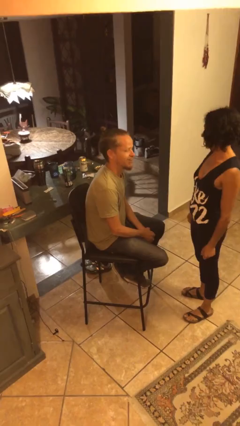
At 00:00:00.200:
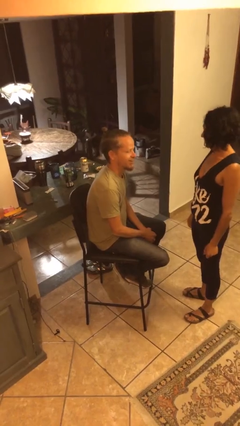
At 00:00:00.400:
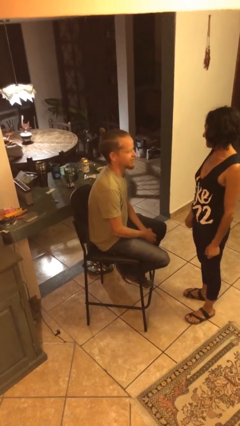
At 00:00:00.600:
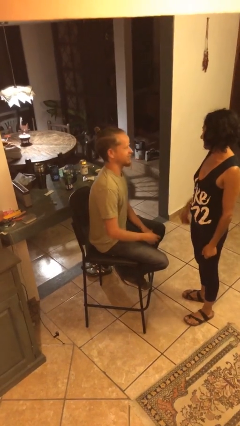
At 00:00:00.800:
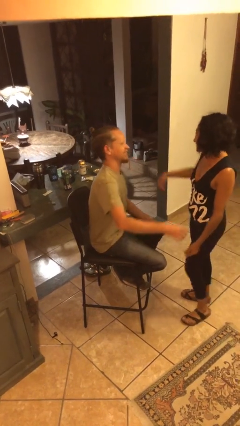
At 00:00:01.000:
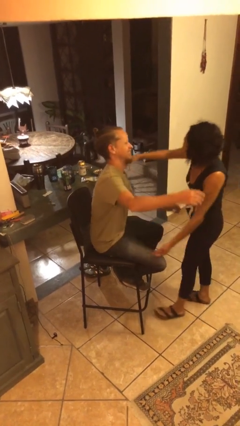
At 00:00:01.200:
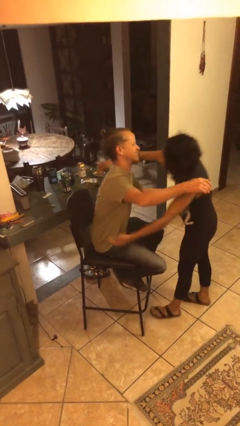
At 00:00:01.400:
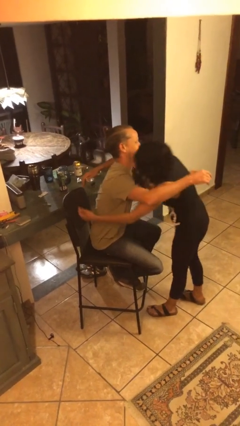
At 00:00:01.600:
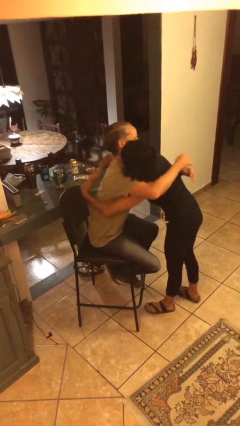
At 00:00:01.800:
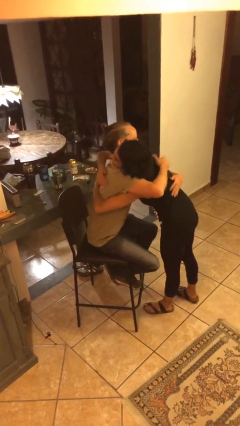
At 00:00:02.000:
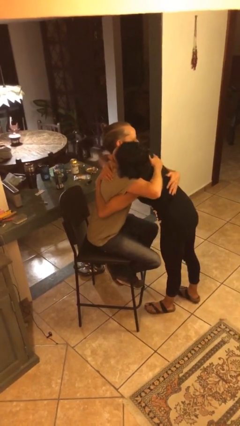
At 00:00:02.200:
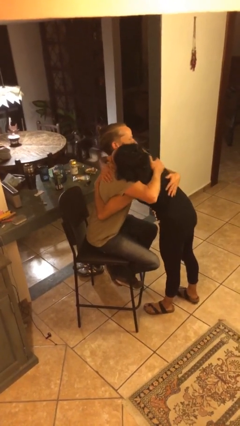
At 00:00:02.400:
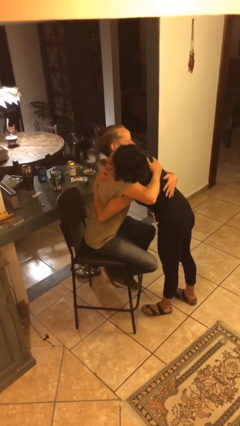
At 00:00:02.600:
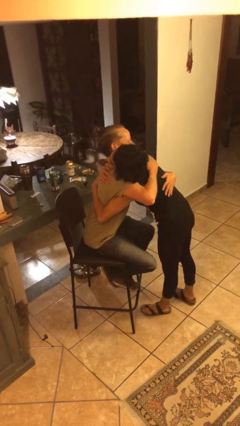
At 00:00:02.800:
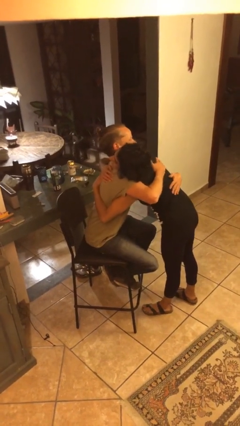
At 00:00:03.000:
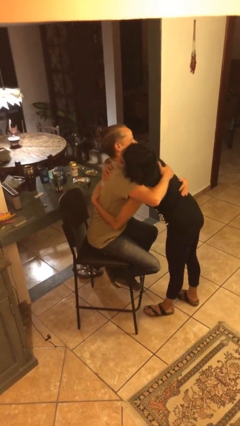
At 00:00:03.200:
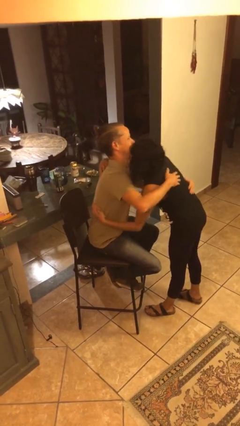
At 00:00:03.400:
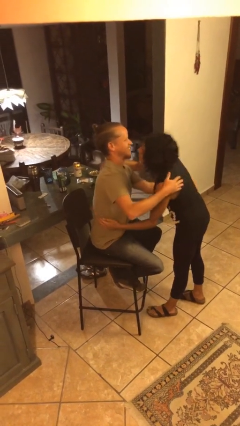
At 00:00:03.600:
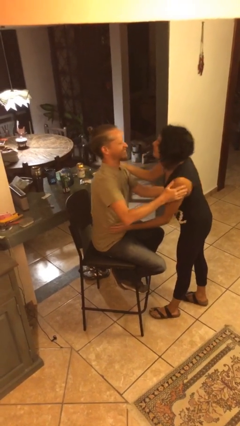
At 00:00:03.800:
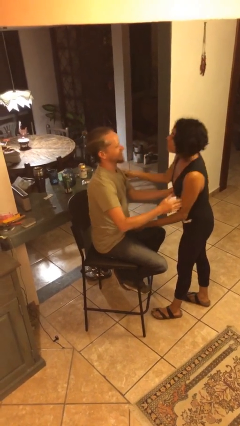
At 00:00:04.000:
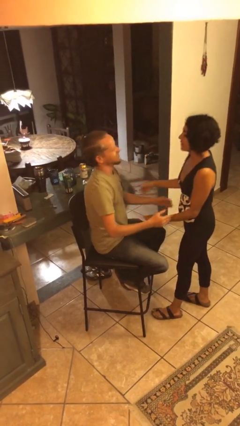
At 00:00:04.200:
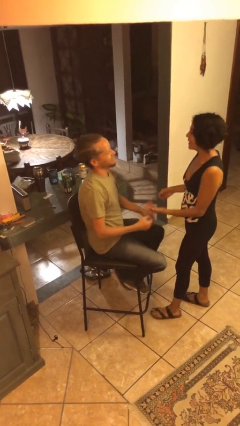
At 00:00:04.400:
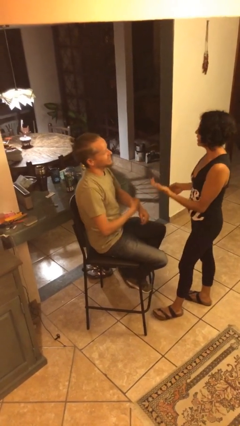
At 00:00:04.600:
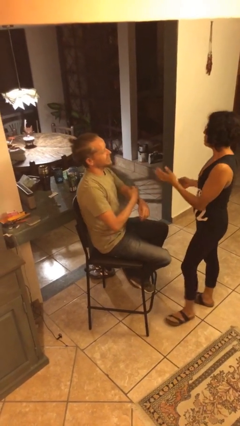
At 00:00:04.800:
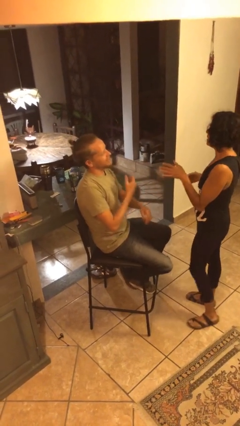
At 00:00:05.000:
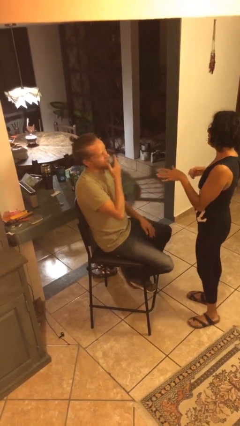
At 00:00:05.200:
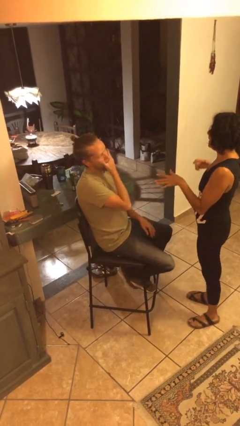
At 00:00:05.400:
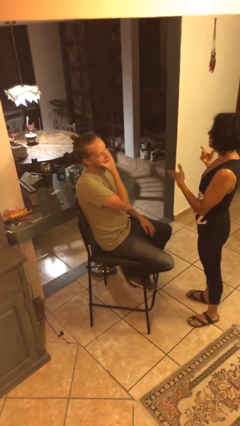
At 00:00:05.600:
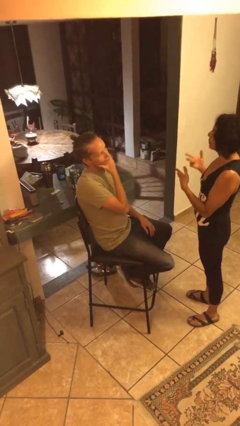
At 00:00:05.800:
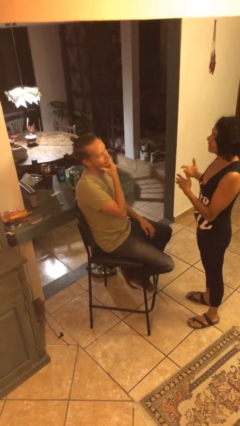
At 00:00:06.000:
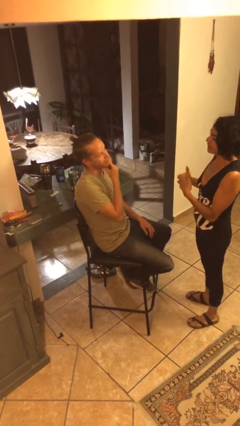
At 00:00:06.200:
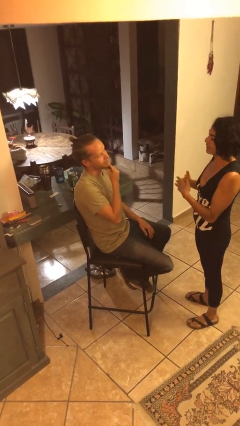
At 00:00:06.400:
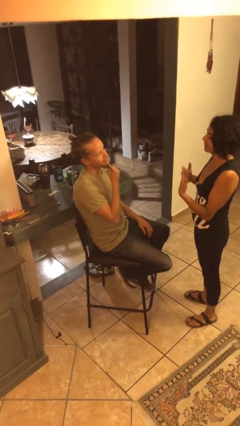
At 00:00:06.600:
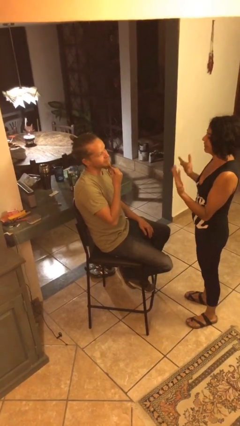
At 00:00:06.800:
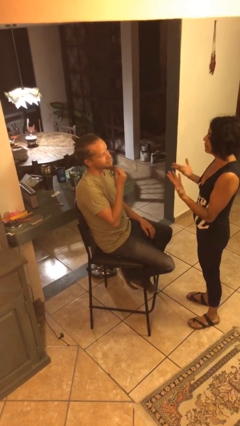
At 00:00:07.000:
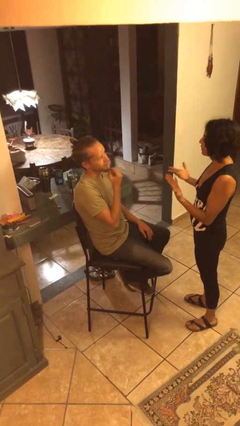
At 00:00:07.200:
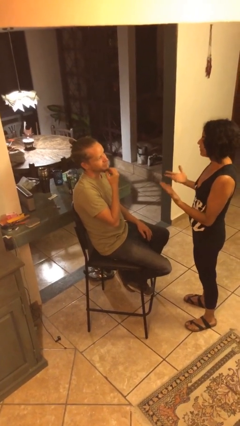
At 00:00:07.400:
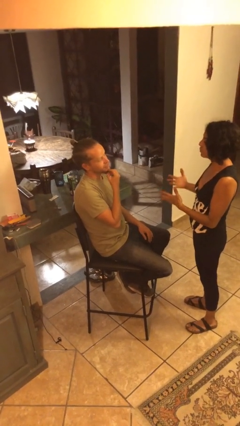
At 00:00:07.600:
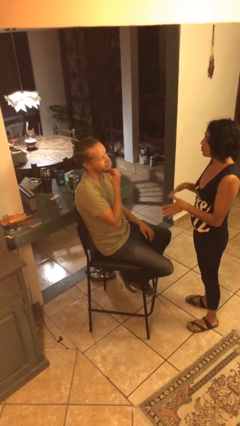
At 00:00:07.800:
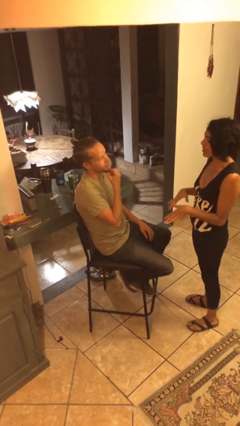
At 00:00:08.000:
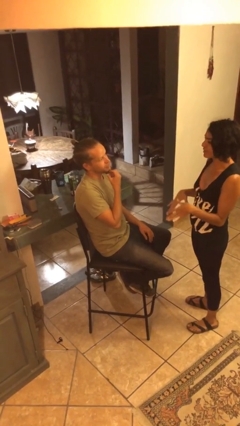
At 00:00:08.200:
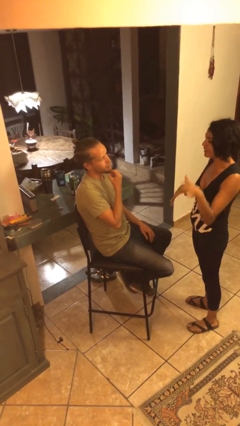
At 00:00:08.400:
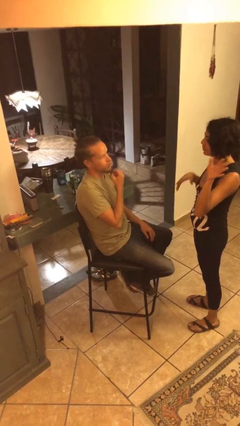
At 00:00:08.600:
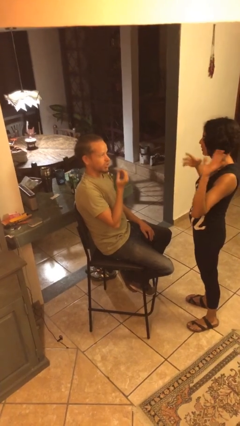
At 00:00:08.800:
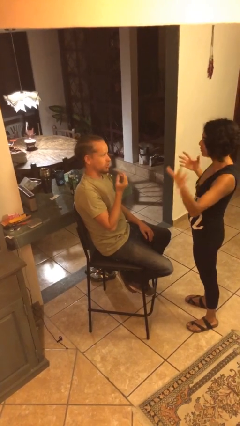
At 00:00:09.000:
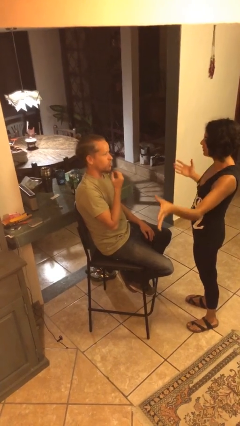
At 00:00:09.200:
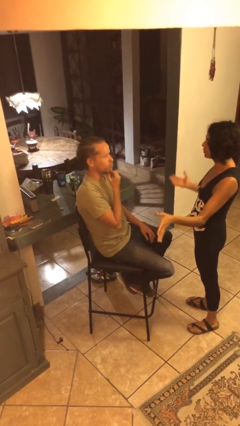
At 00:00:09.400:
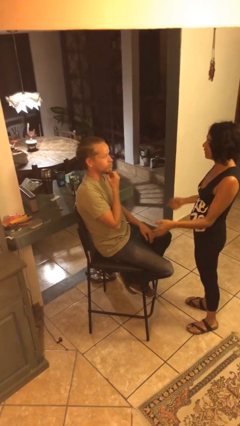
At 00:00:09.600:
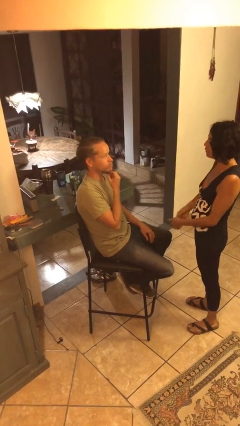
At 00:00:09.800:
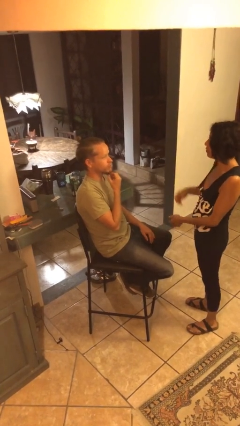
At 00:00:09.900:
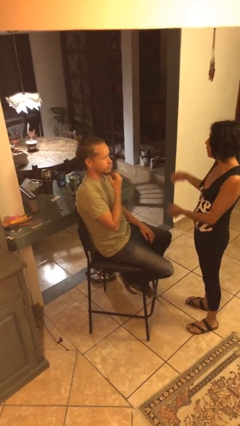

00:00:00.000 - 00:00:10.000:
person embraces person

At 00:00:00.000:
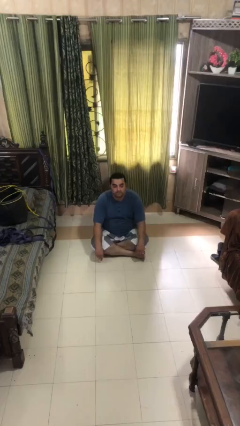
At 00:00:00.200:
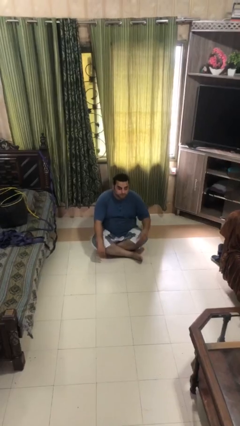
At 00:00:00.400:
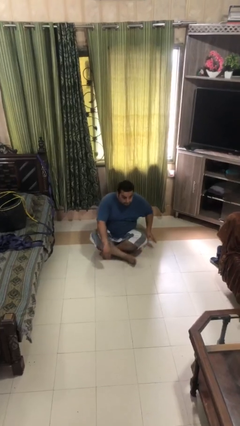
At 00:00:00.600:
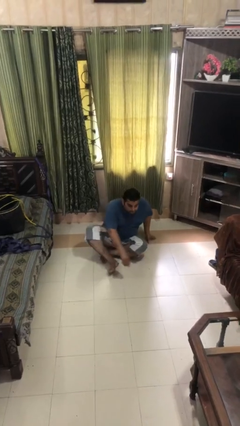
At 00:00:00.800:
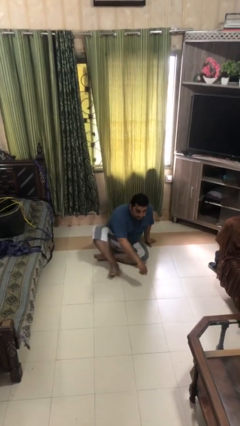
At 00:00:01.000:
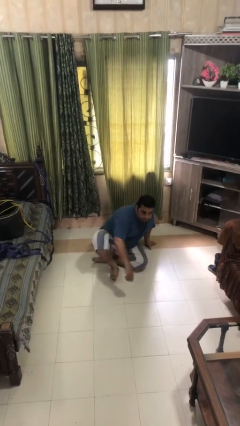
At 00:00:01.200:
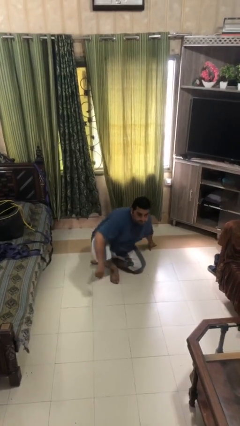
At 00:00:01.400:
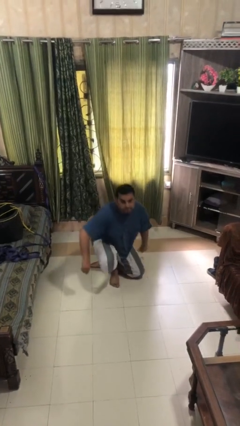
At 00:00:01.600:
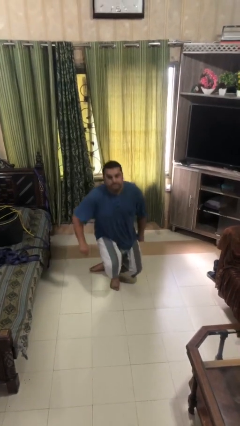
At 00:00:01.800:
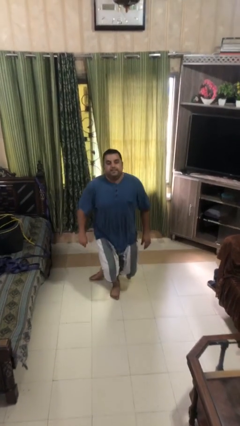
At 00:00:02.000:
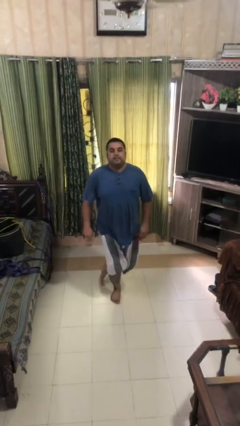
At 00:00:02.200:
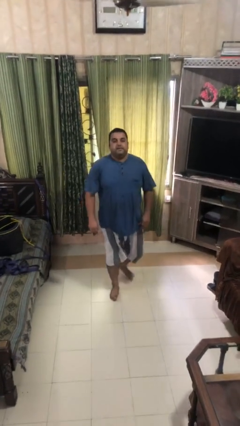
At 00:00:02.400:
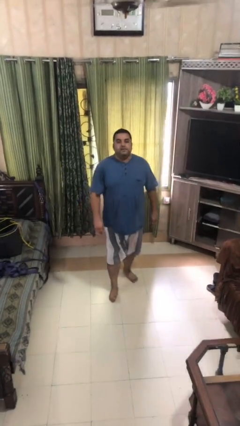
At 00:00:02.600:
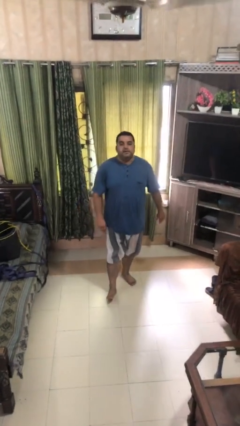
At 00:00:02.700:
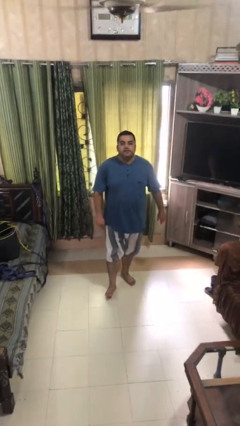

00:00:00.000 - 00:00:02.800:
person stands up from floor

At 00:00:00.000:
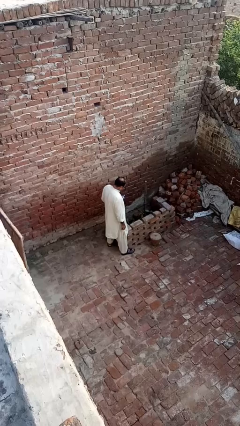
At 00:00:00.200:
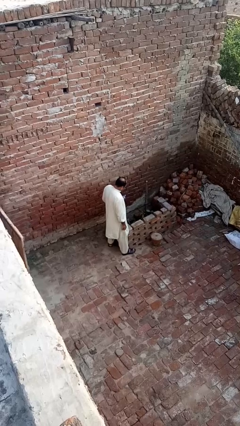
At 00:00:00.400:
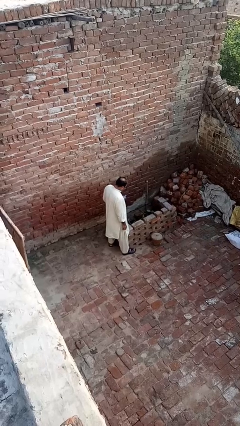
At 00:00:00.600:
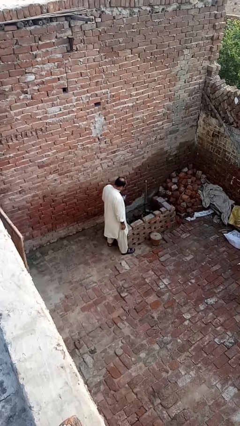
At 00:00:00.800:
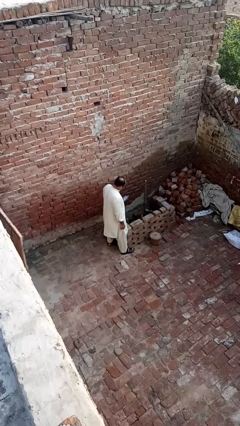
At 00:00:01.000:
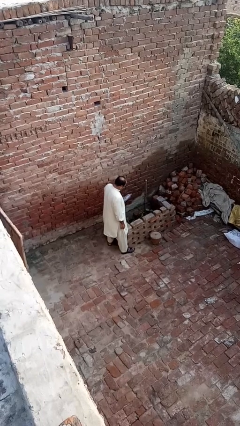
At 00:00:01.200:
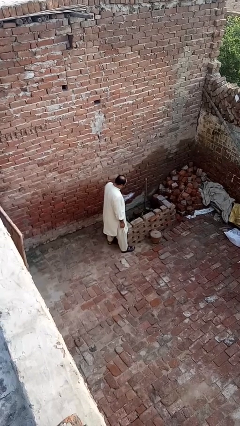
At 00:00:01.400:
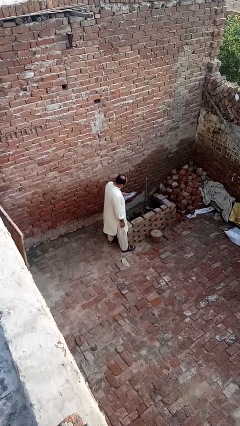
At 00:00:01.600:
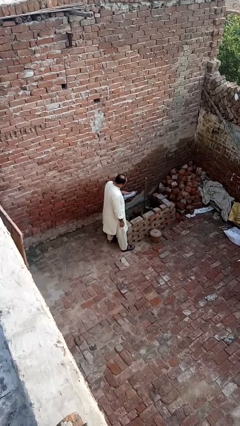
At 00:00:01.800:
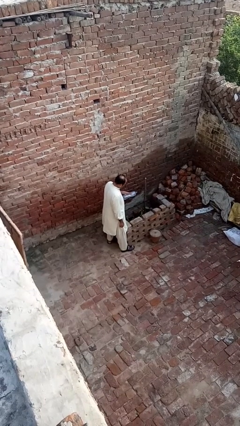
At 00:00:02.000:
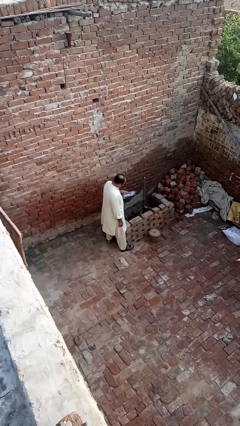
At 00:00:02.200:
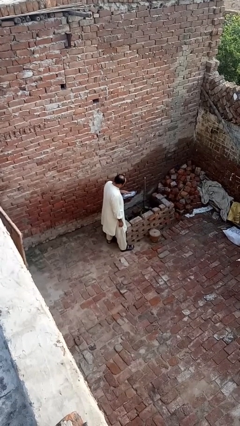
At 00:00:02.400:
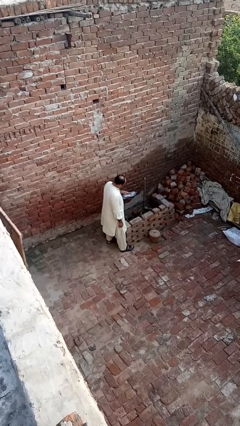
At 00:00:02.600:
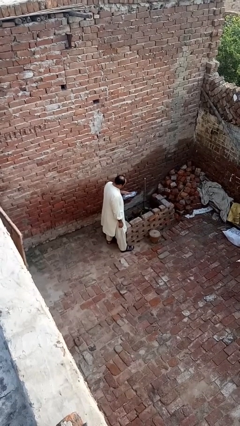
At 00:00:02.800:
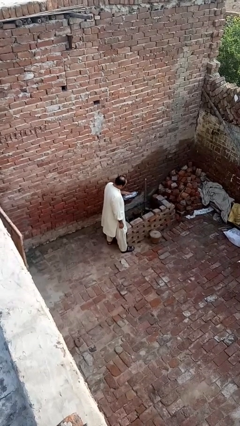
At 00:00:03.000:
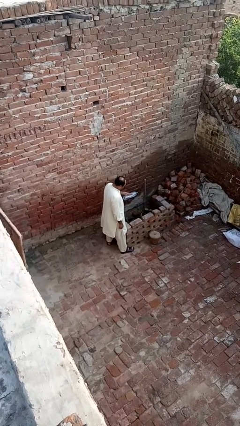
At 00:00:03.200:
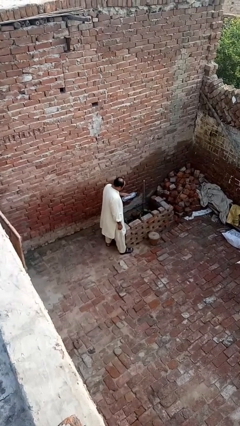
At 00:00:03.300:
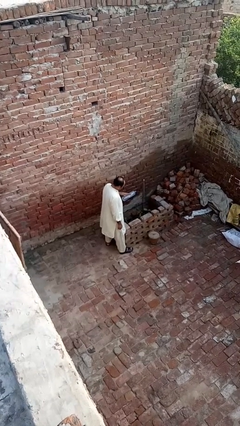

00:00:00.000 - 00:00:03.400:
person waters houseplant

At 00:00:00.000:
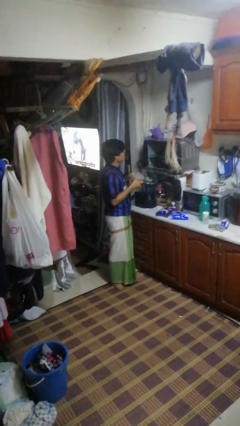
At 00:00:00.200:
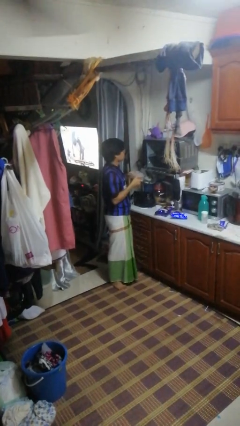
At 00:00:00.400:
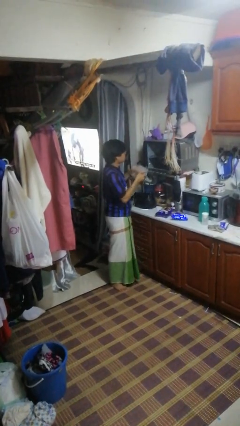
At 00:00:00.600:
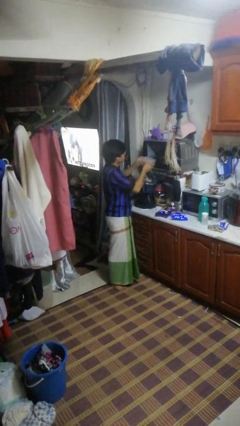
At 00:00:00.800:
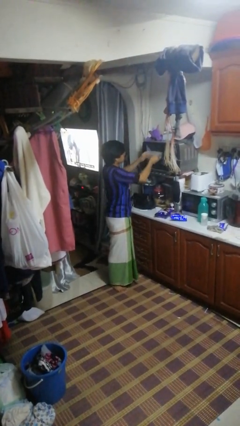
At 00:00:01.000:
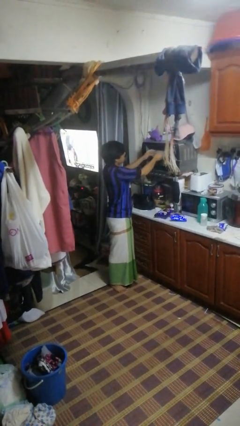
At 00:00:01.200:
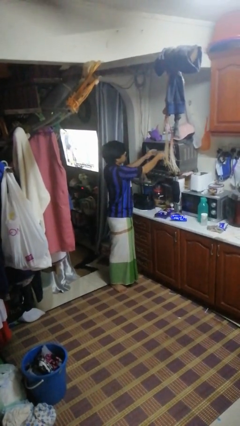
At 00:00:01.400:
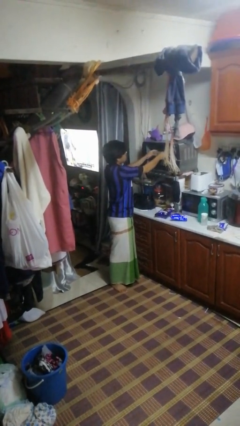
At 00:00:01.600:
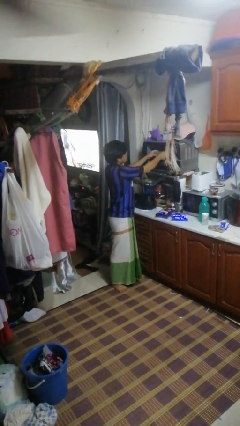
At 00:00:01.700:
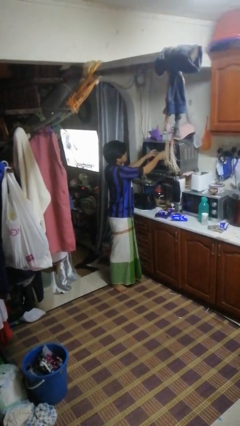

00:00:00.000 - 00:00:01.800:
person puts object into oven
